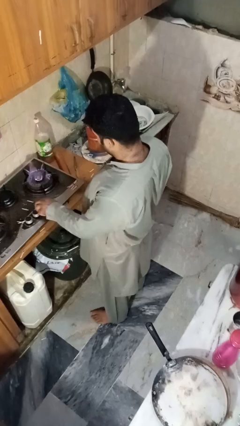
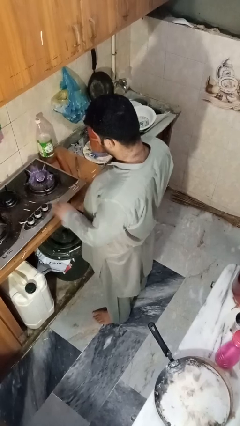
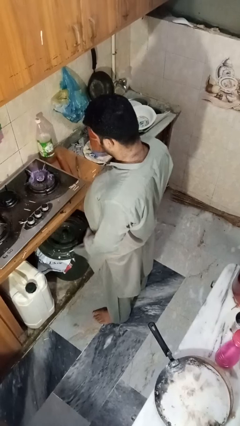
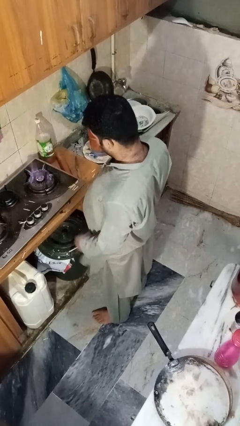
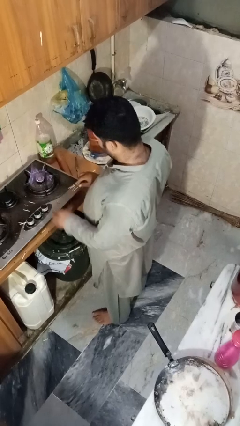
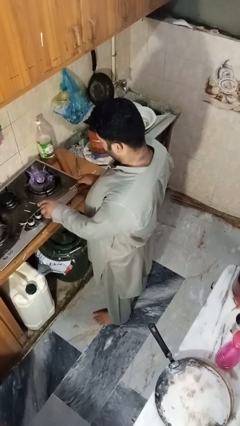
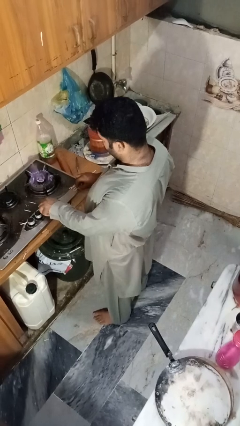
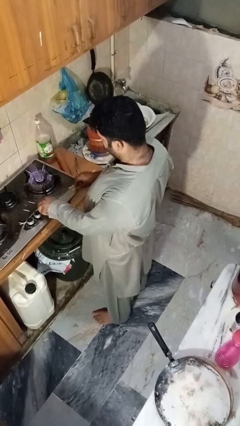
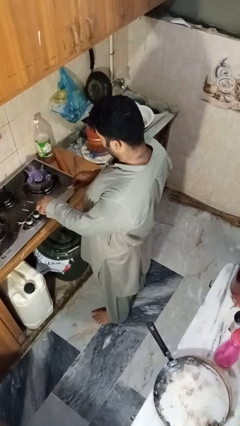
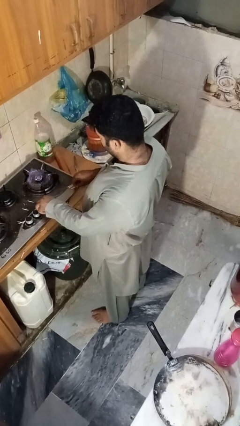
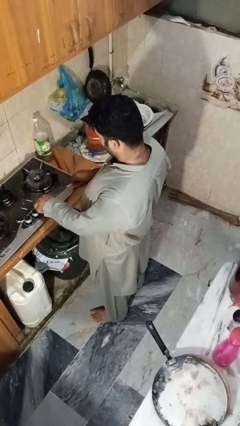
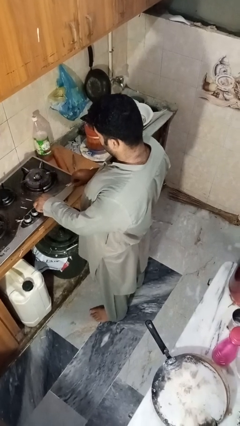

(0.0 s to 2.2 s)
person turns off stovetop

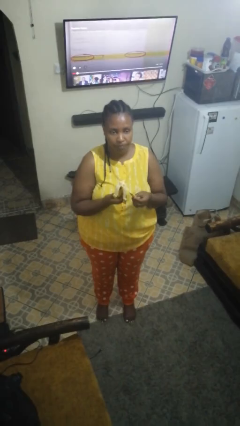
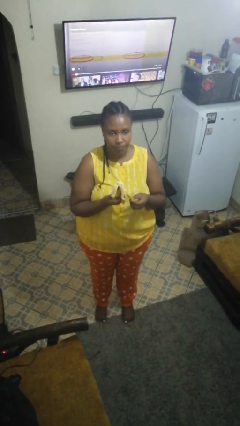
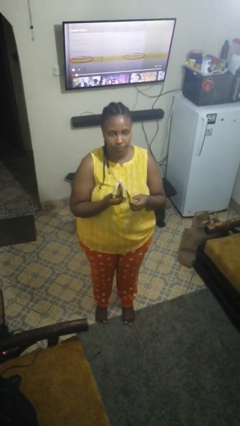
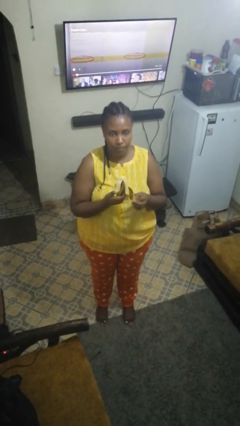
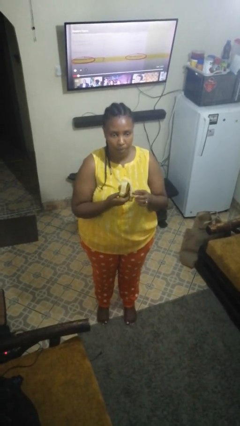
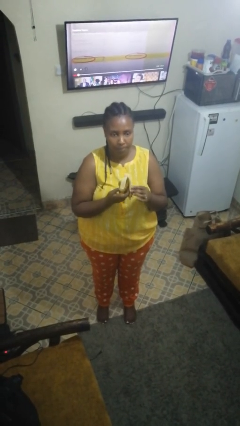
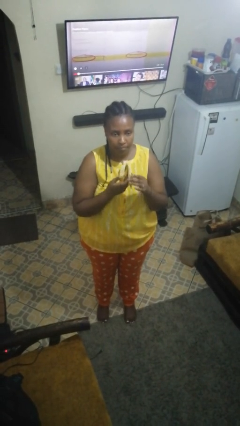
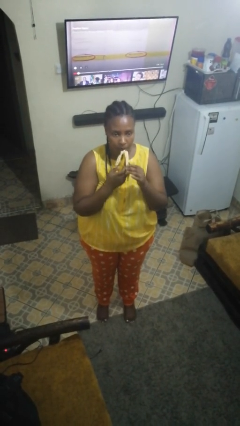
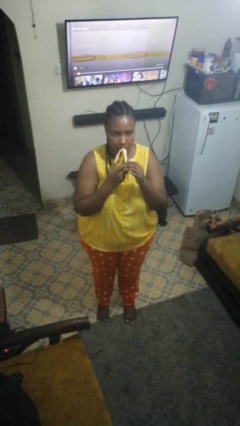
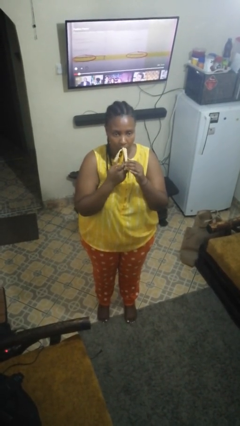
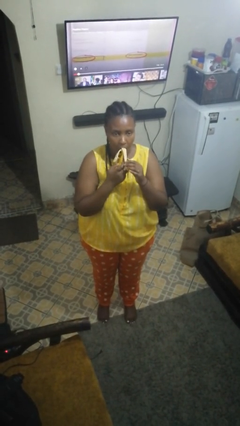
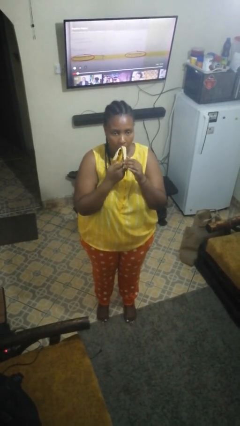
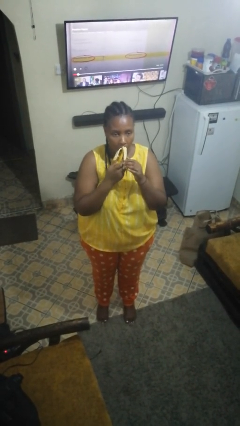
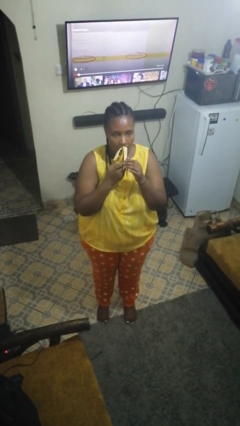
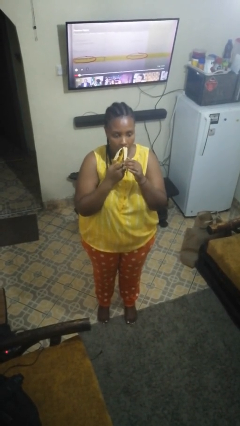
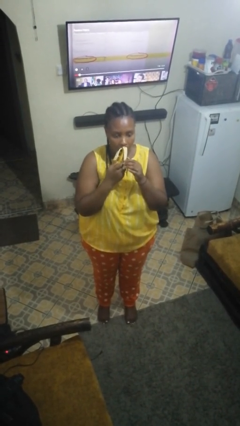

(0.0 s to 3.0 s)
person eats banana

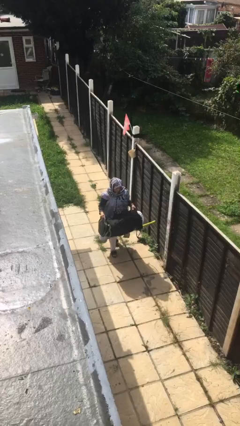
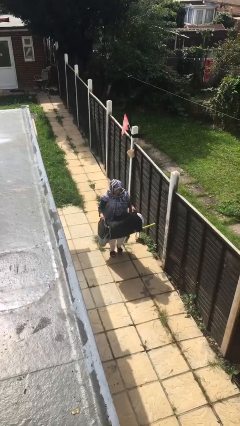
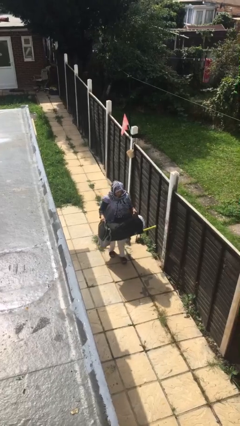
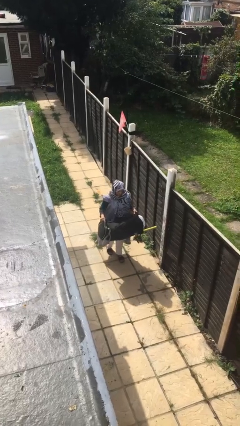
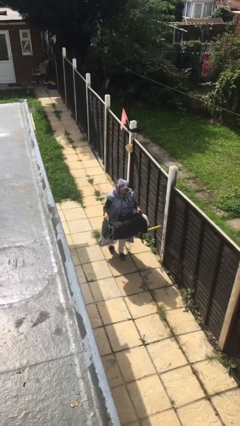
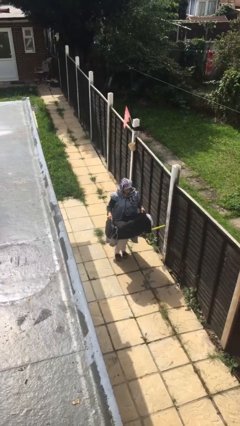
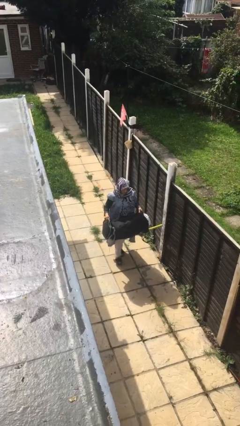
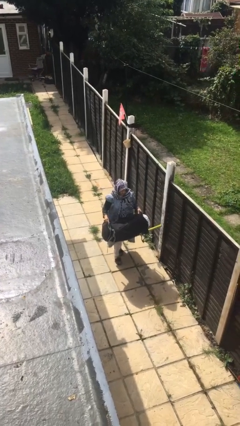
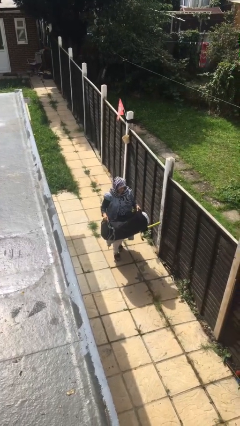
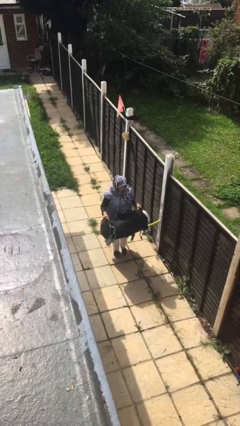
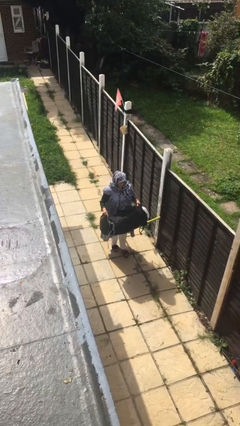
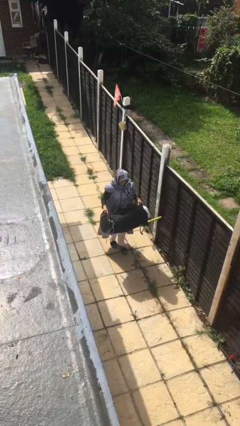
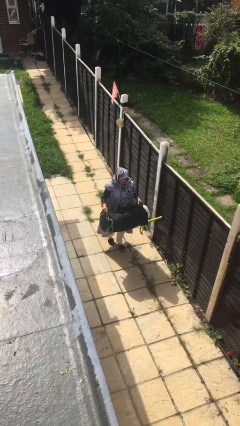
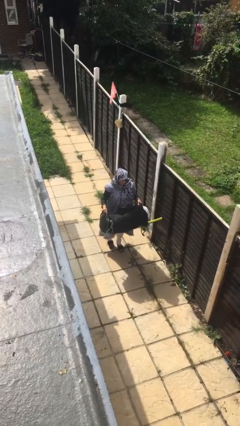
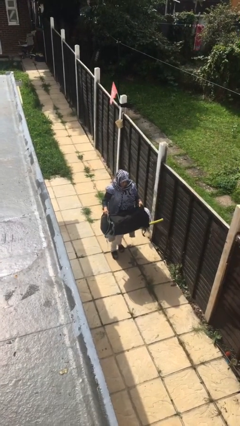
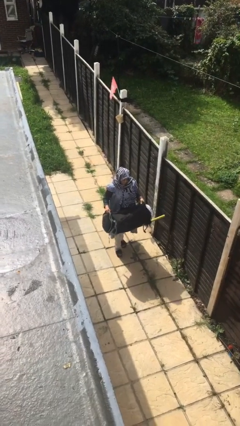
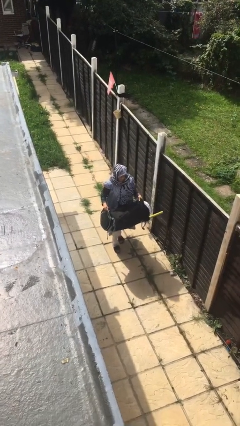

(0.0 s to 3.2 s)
person carries heavy object

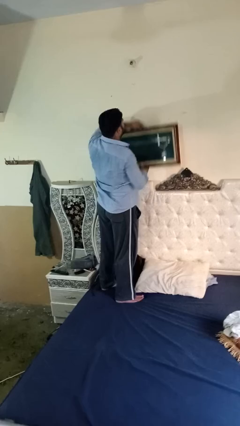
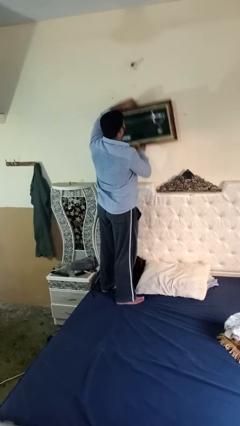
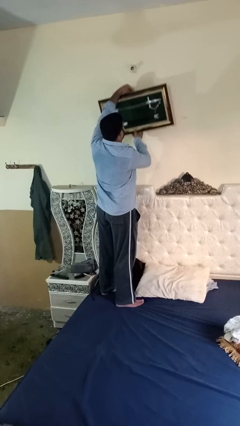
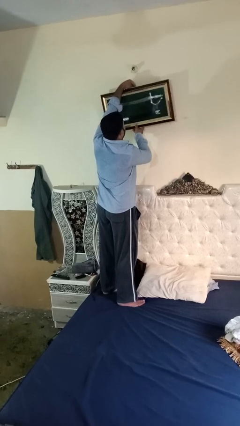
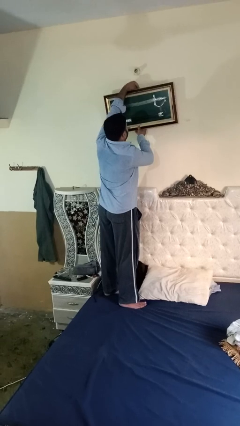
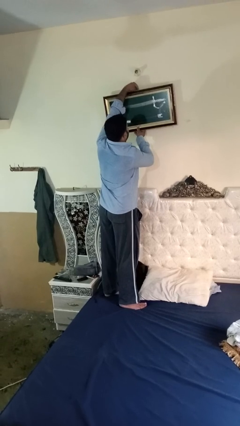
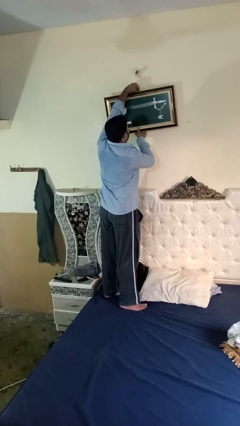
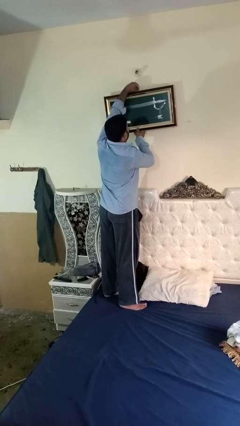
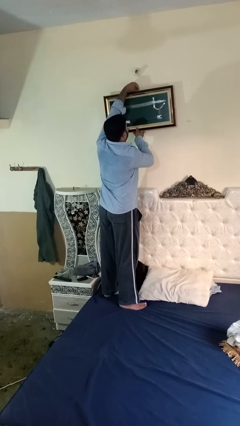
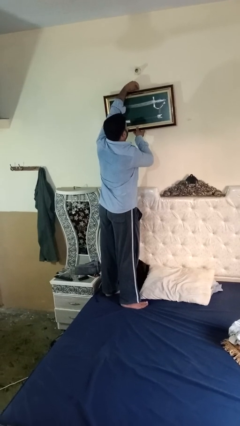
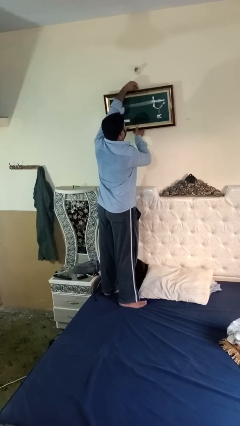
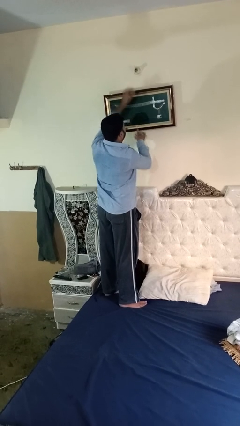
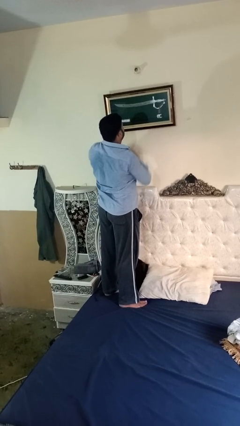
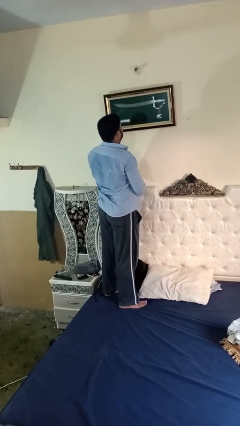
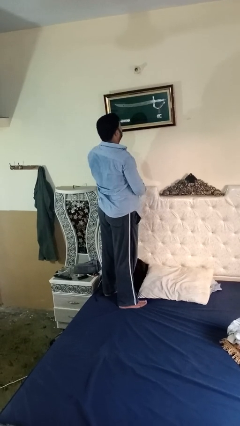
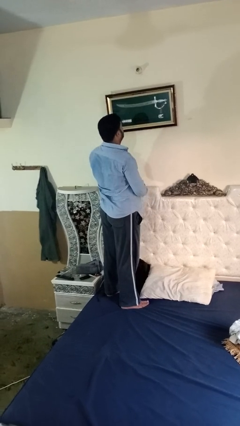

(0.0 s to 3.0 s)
person puts up picture frame

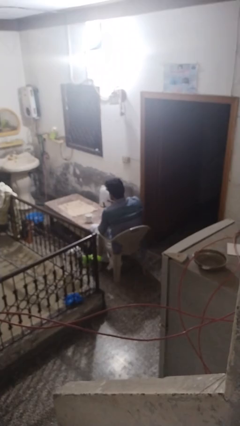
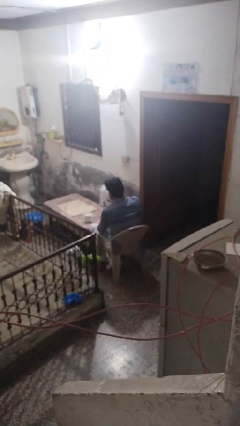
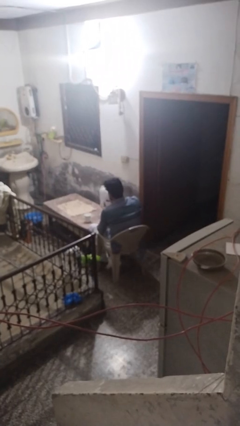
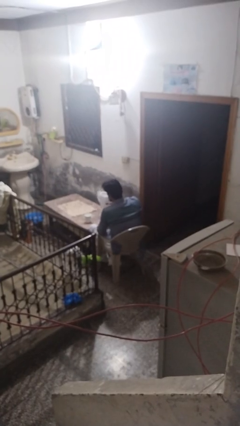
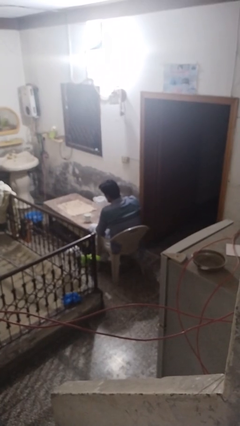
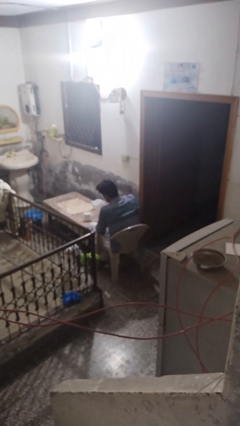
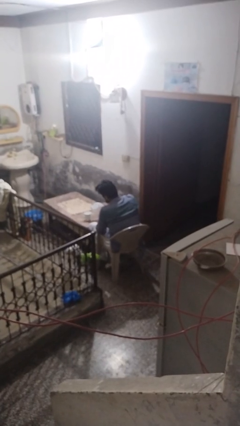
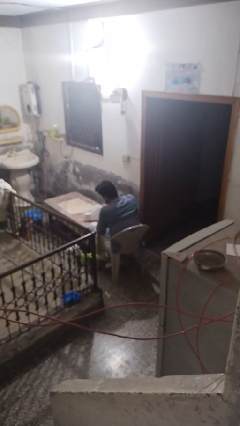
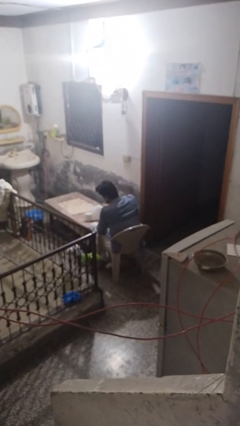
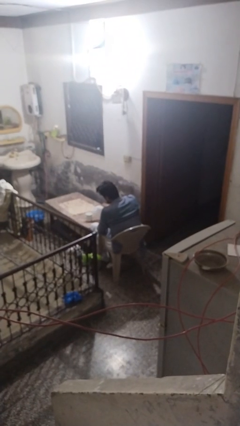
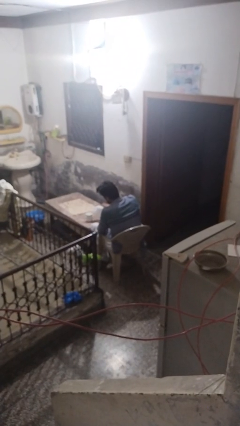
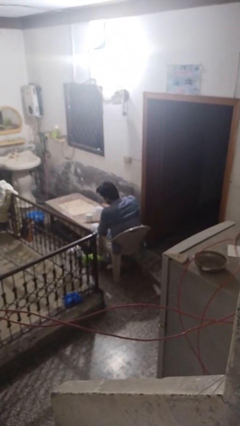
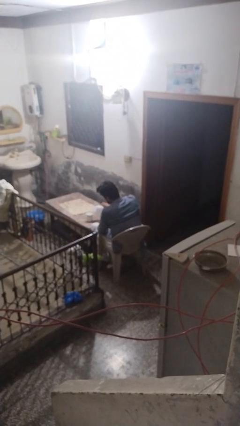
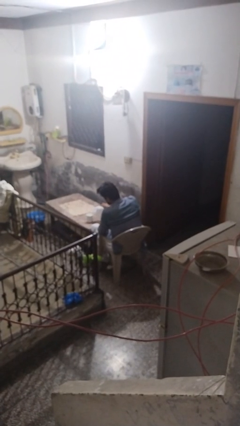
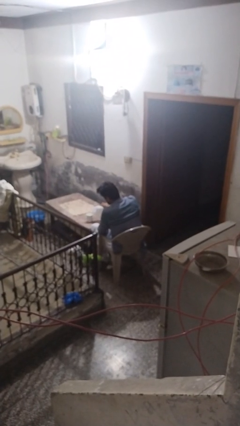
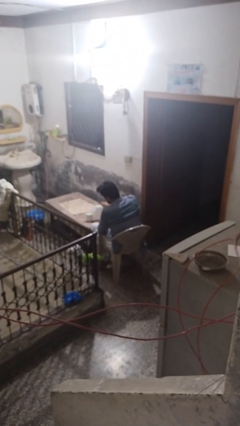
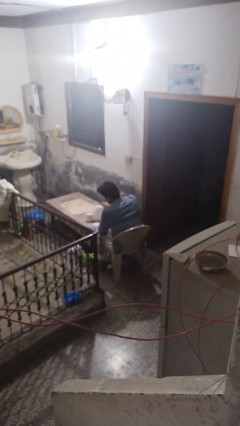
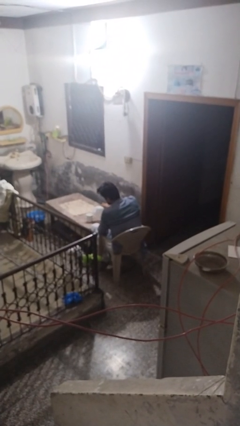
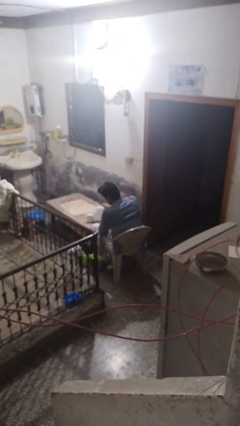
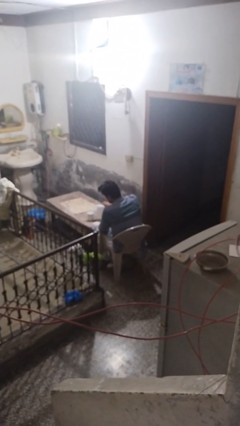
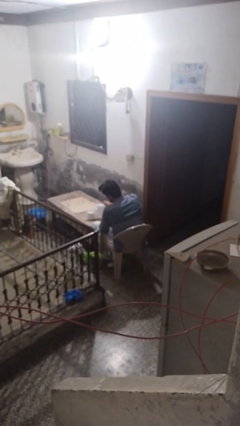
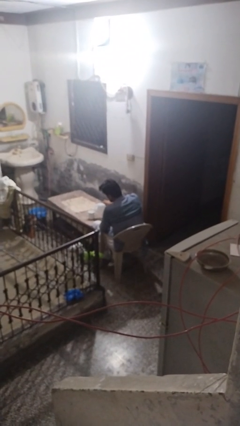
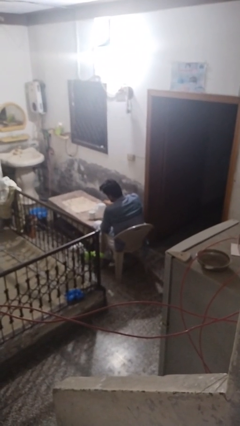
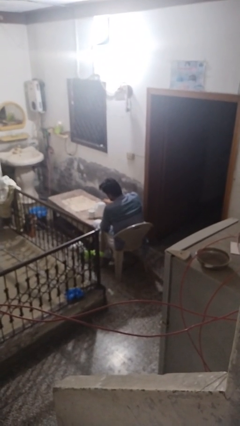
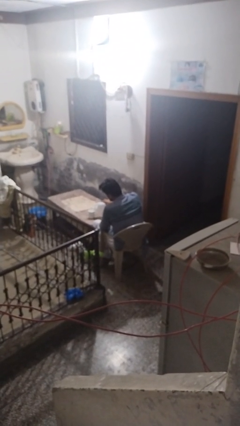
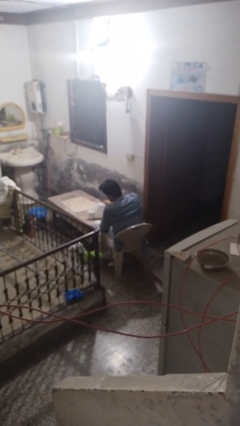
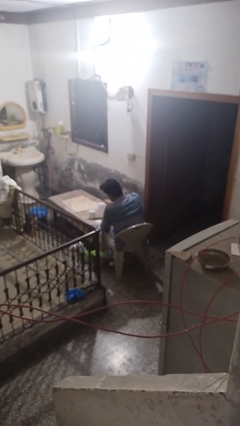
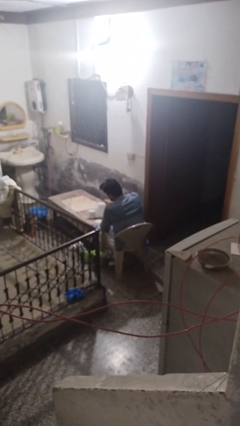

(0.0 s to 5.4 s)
person pours liquid into cup

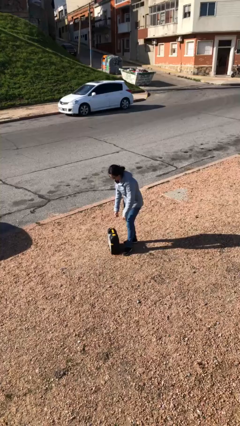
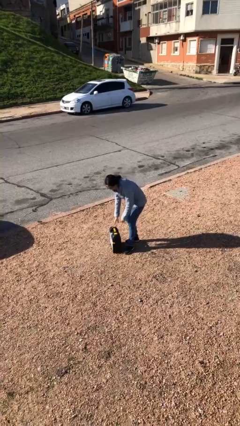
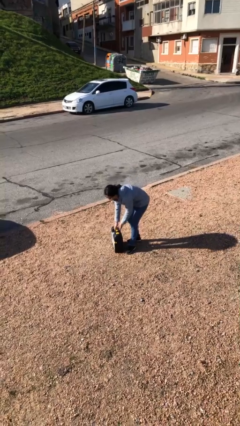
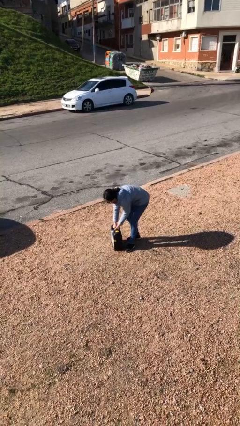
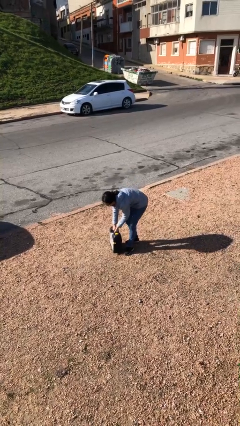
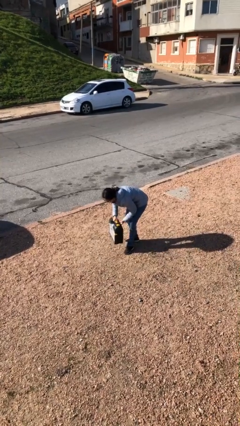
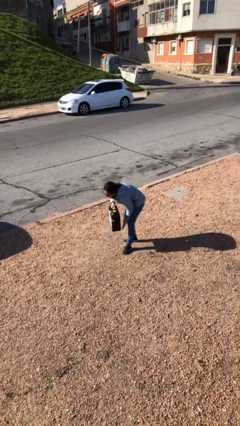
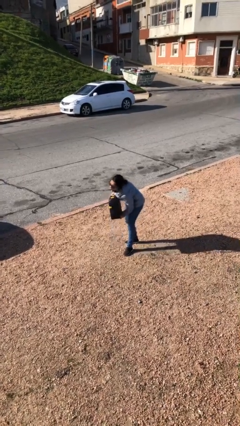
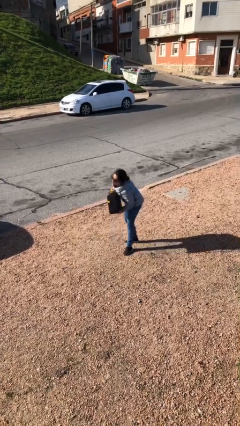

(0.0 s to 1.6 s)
person picks up object from floor
